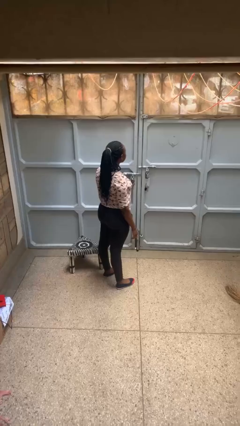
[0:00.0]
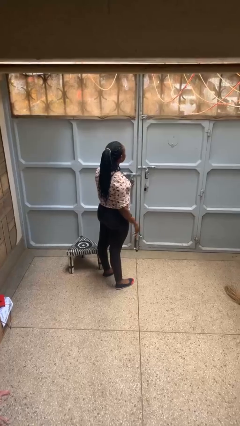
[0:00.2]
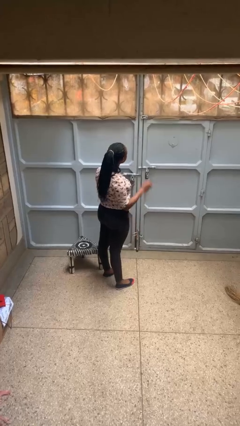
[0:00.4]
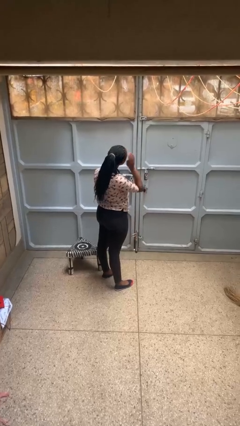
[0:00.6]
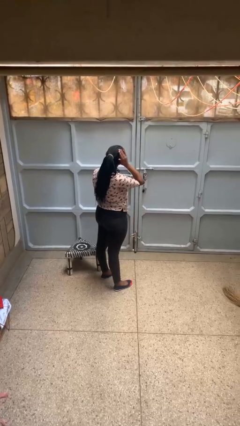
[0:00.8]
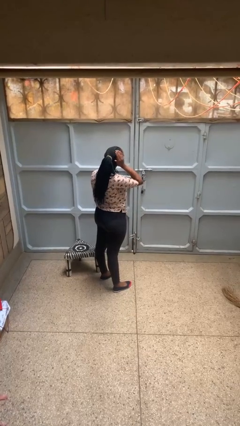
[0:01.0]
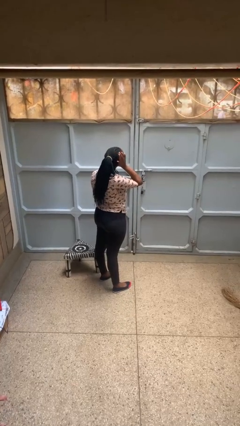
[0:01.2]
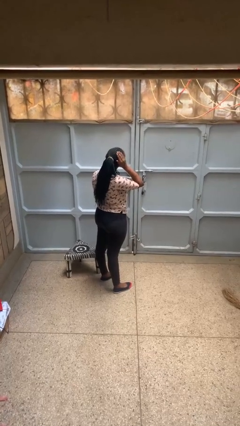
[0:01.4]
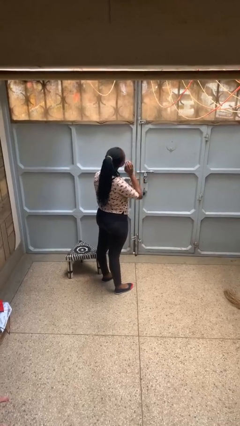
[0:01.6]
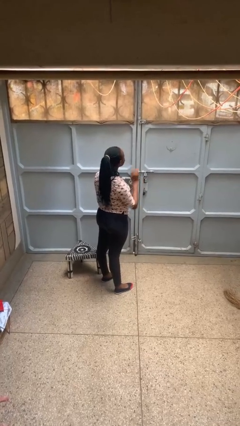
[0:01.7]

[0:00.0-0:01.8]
person pats head

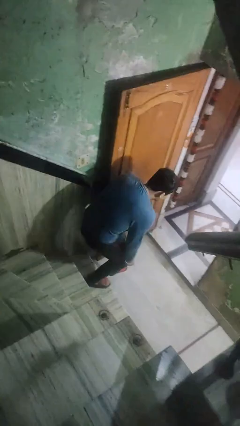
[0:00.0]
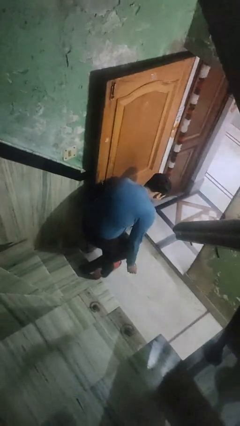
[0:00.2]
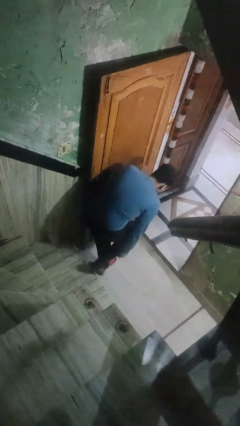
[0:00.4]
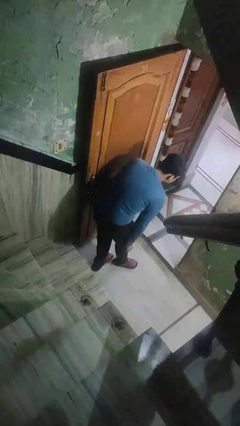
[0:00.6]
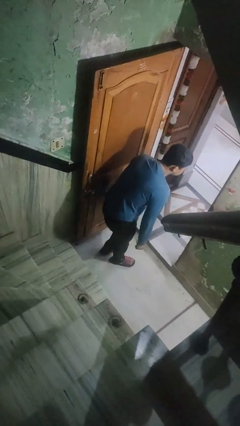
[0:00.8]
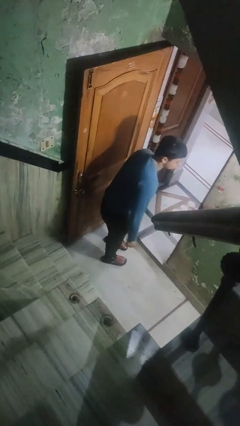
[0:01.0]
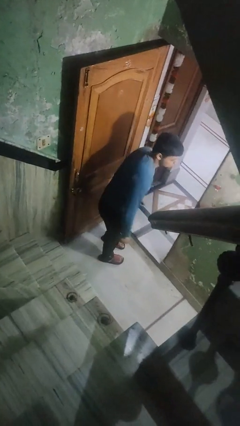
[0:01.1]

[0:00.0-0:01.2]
person trips on stair

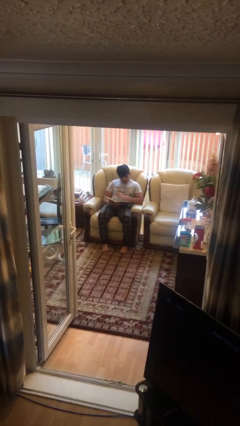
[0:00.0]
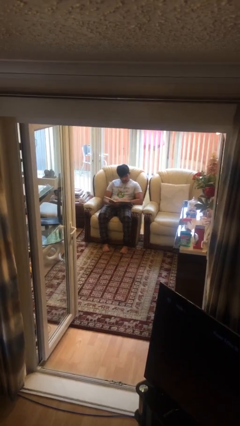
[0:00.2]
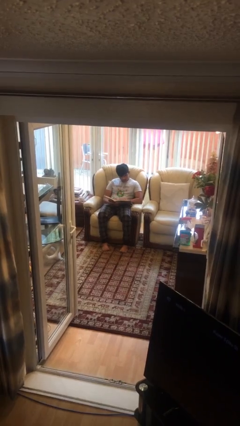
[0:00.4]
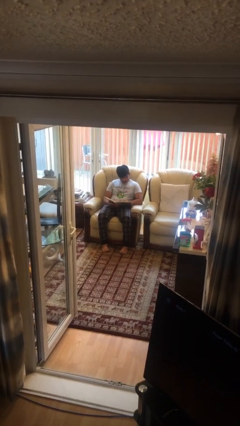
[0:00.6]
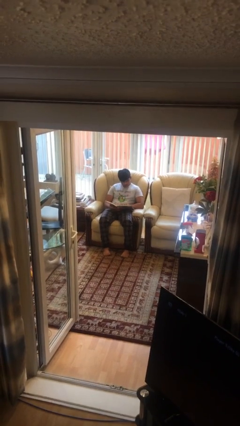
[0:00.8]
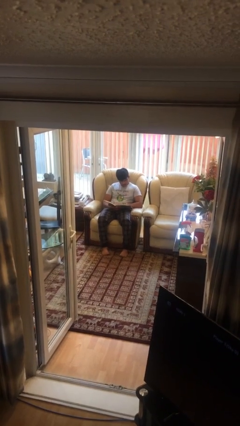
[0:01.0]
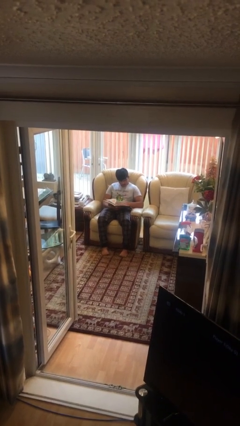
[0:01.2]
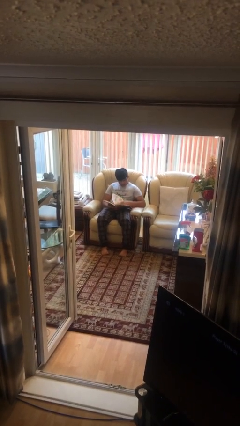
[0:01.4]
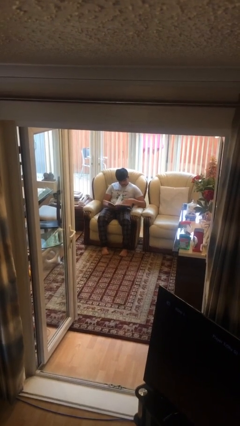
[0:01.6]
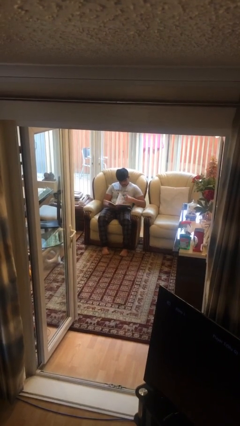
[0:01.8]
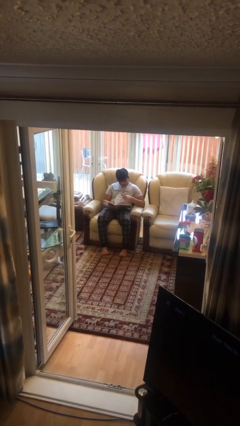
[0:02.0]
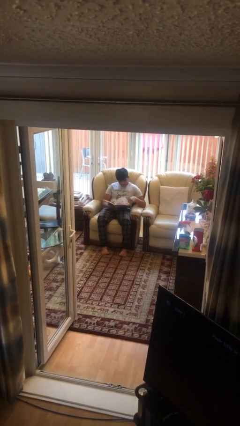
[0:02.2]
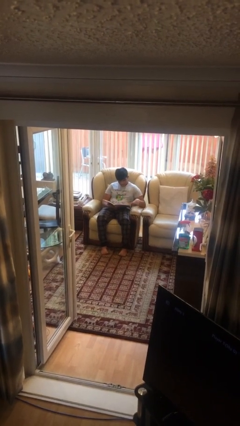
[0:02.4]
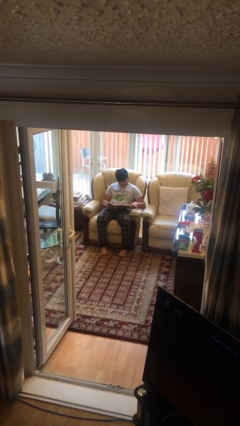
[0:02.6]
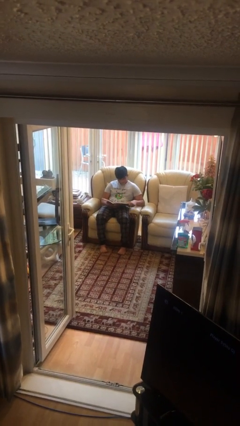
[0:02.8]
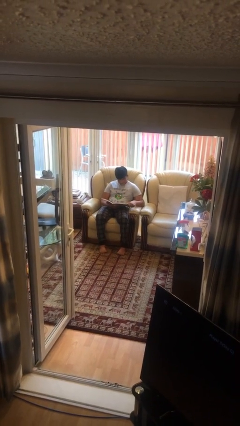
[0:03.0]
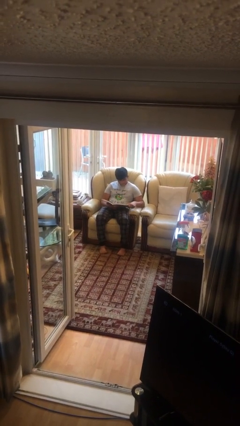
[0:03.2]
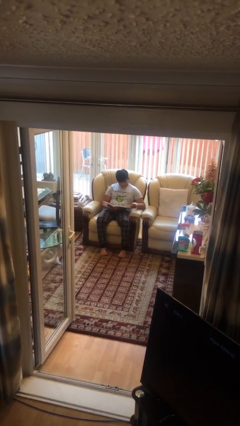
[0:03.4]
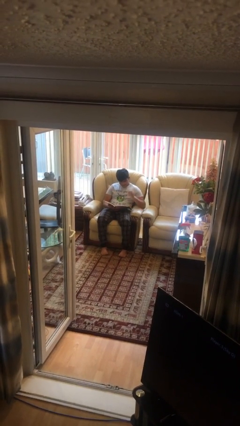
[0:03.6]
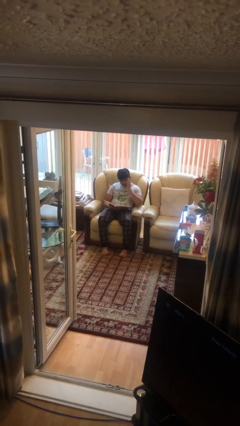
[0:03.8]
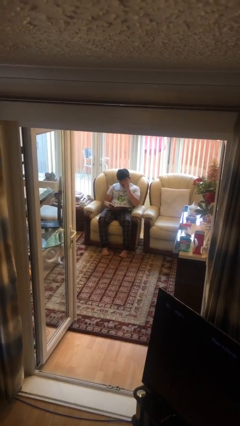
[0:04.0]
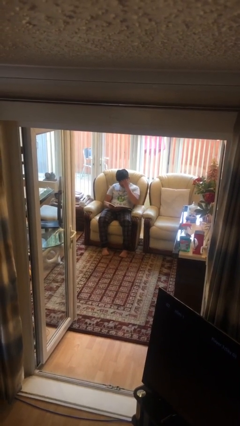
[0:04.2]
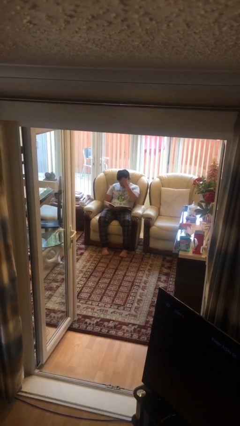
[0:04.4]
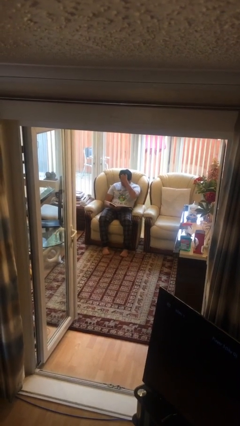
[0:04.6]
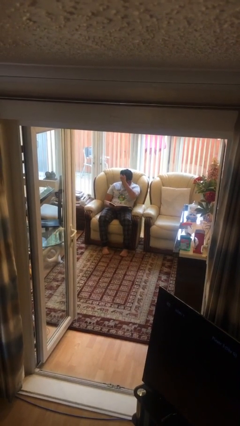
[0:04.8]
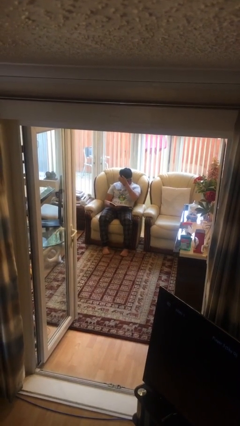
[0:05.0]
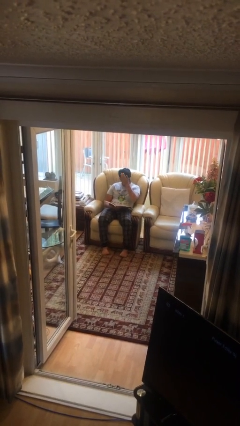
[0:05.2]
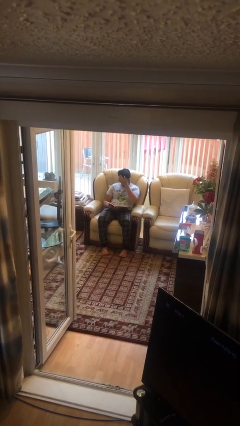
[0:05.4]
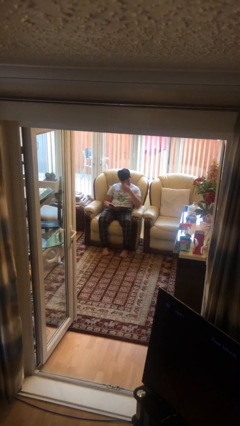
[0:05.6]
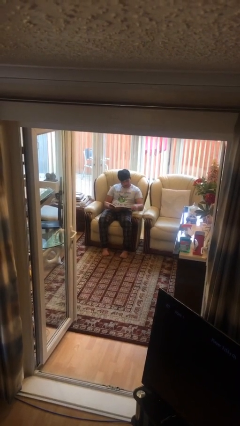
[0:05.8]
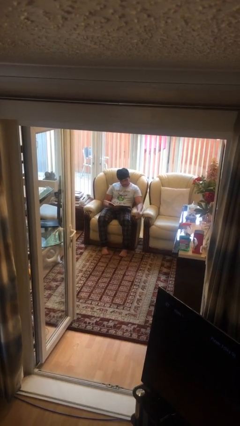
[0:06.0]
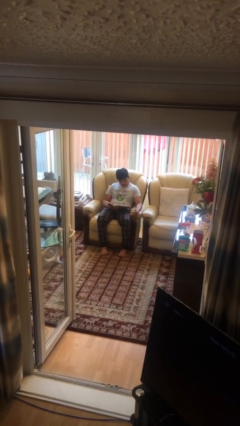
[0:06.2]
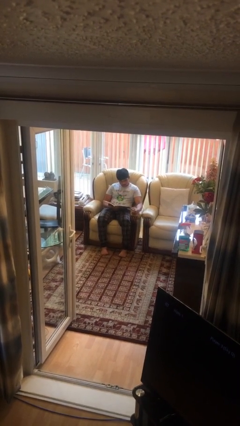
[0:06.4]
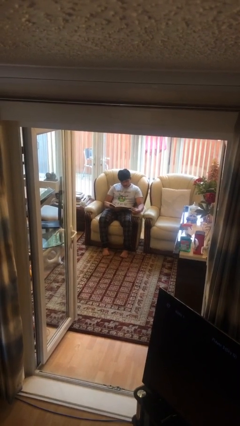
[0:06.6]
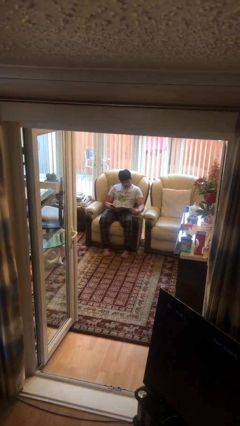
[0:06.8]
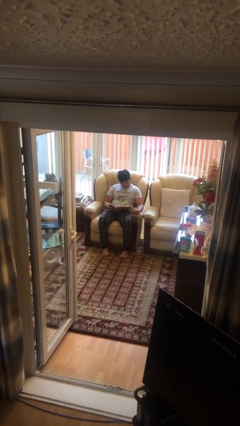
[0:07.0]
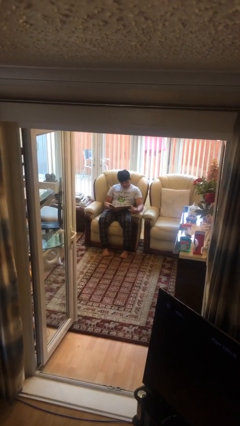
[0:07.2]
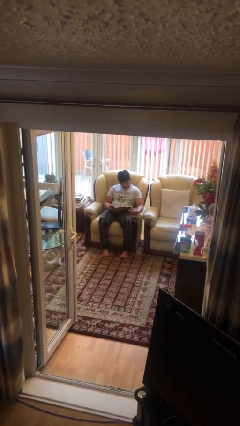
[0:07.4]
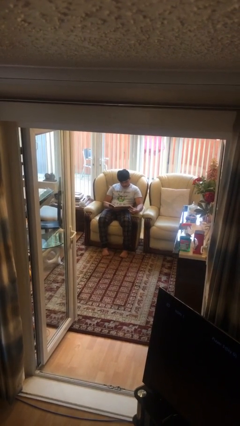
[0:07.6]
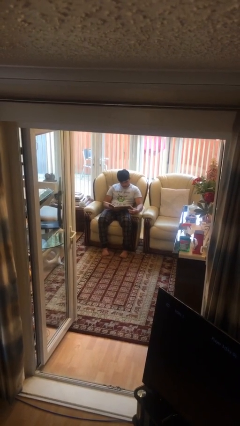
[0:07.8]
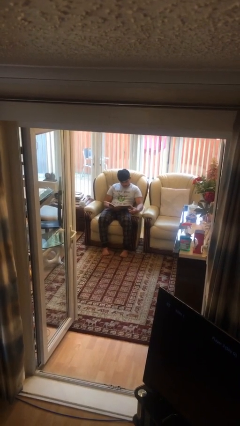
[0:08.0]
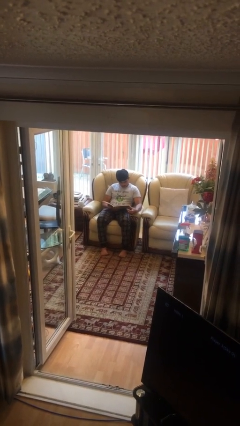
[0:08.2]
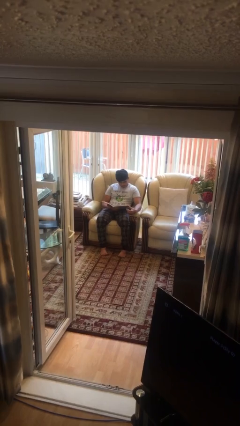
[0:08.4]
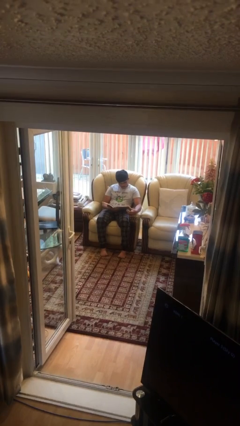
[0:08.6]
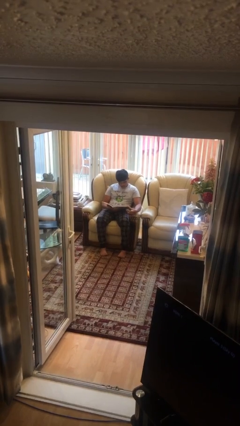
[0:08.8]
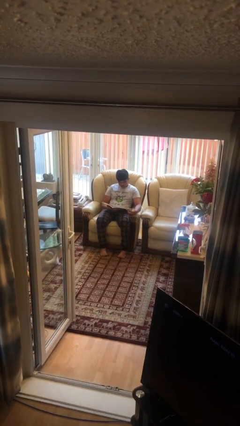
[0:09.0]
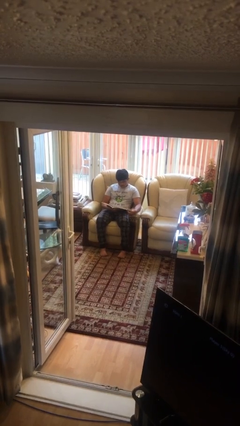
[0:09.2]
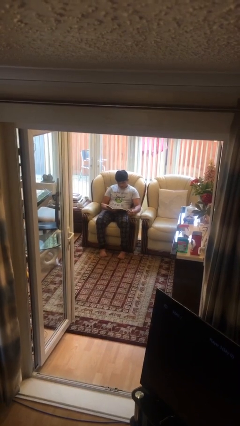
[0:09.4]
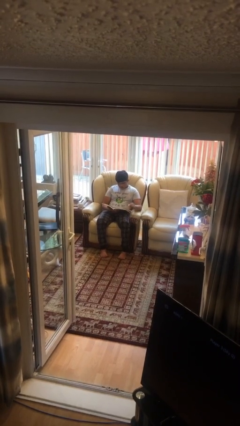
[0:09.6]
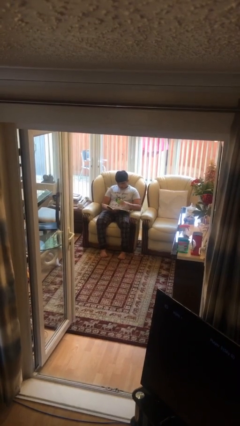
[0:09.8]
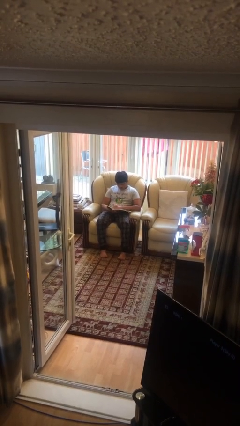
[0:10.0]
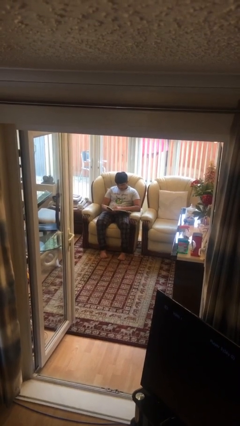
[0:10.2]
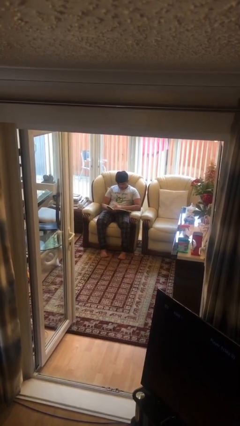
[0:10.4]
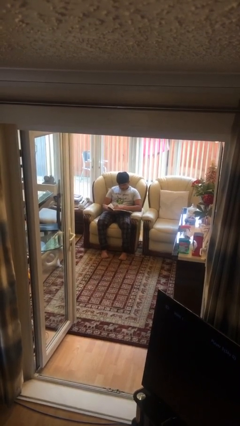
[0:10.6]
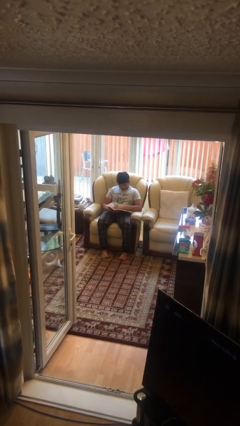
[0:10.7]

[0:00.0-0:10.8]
person reads document

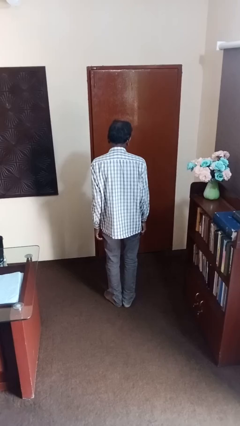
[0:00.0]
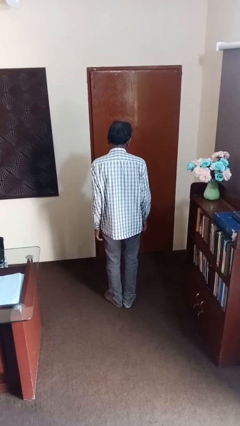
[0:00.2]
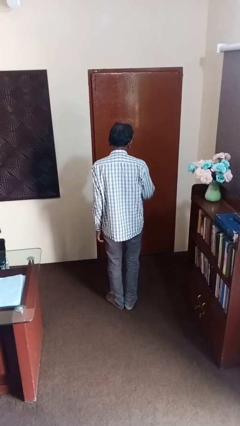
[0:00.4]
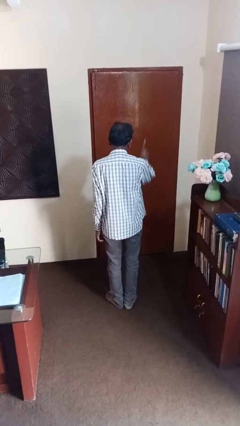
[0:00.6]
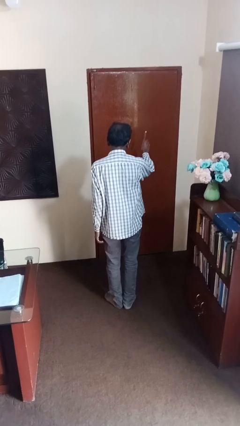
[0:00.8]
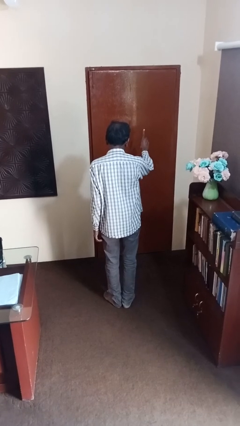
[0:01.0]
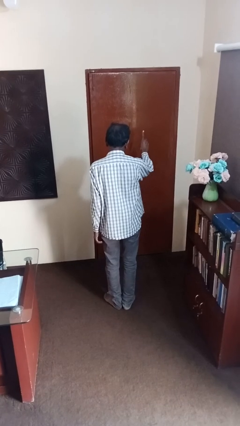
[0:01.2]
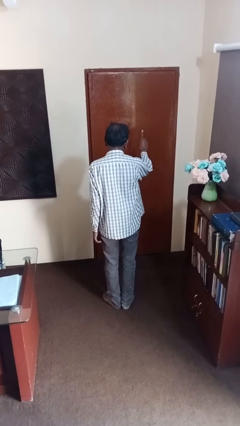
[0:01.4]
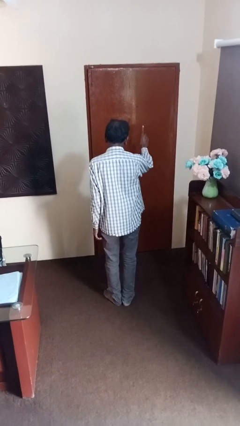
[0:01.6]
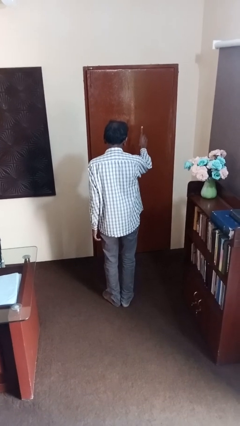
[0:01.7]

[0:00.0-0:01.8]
person gestures number one

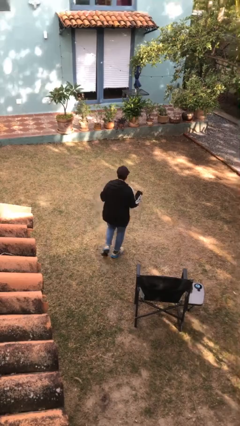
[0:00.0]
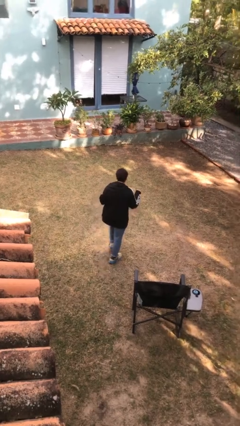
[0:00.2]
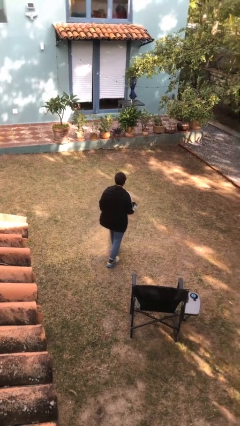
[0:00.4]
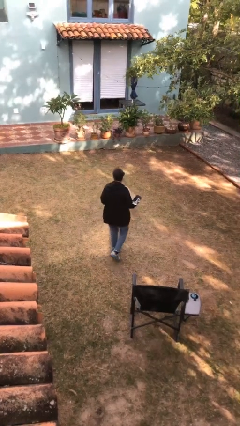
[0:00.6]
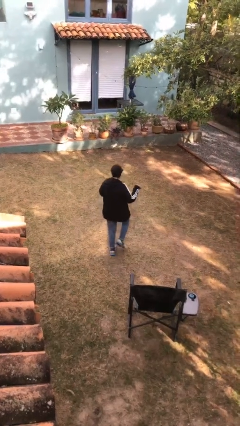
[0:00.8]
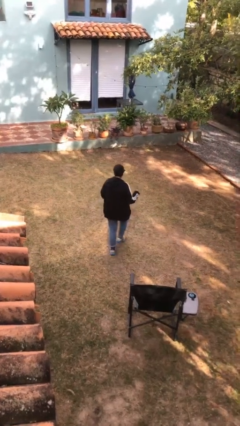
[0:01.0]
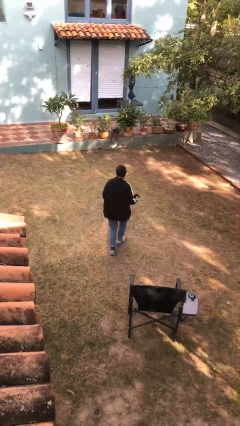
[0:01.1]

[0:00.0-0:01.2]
person walks tiptoe

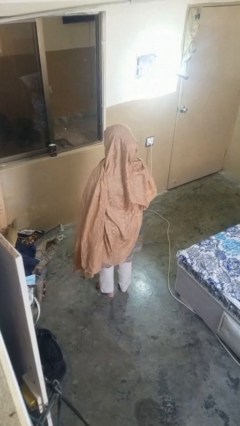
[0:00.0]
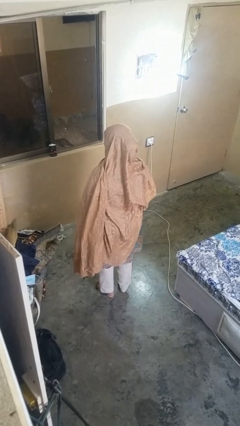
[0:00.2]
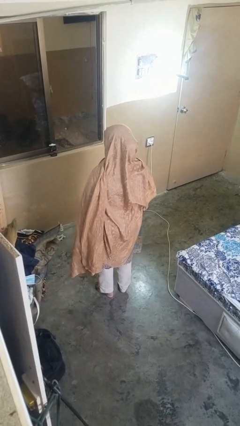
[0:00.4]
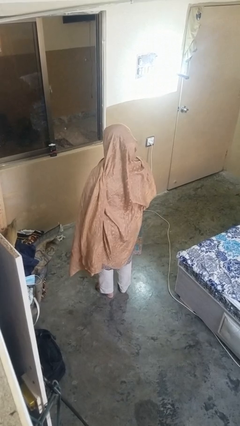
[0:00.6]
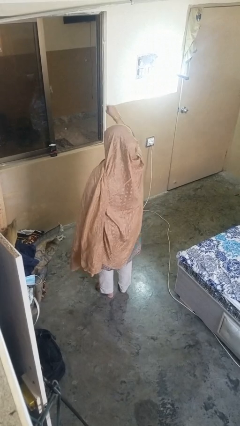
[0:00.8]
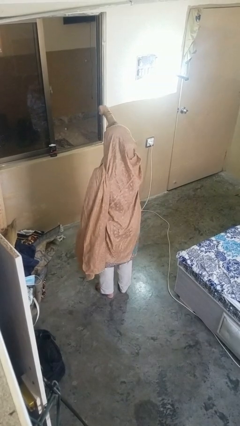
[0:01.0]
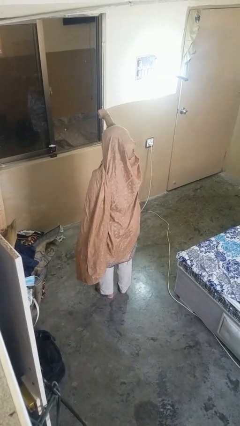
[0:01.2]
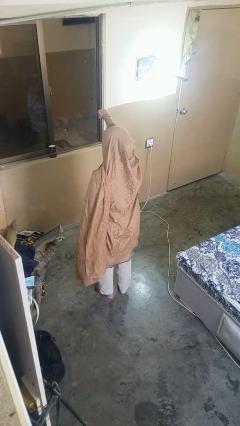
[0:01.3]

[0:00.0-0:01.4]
person punches
